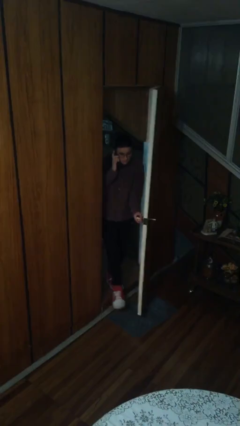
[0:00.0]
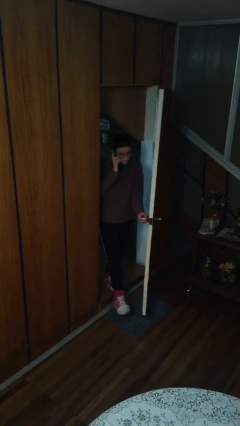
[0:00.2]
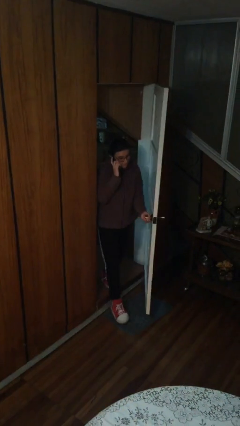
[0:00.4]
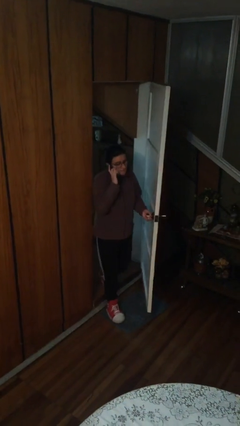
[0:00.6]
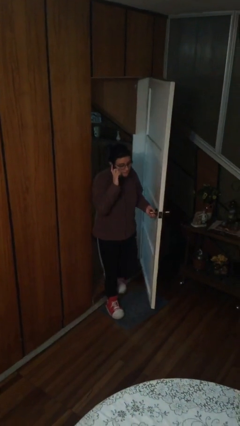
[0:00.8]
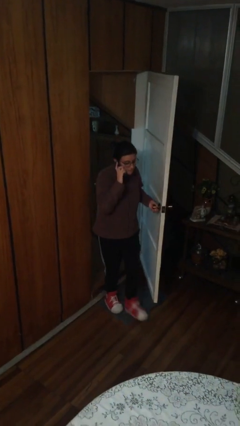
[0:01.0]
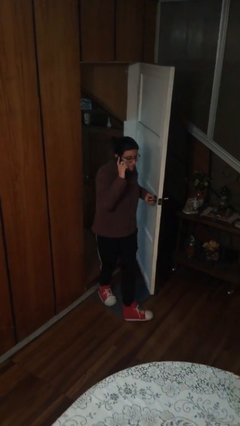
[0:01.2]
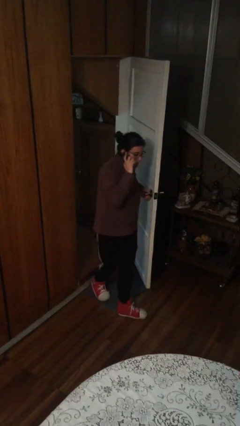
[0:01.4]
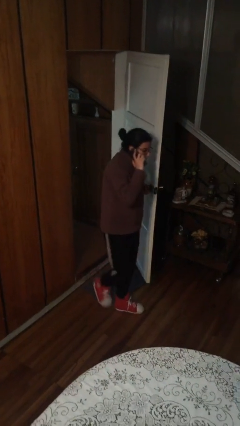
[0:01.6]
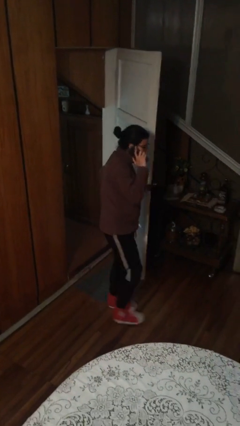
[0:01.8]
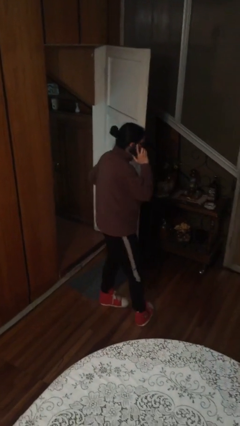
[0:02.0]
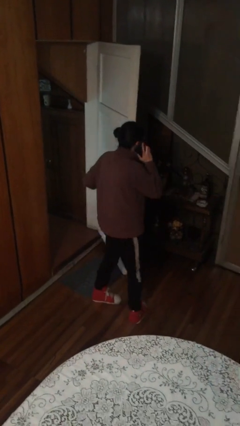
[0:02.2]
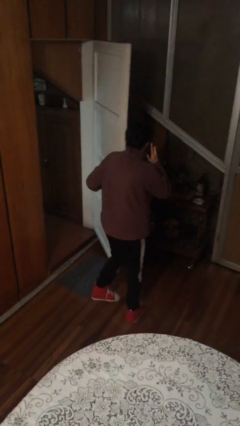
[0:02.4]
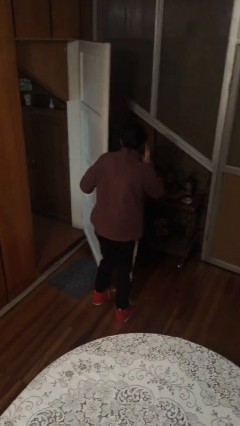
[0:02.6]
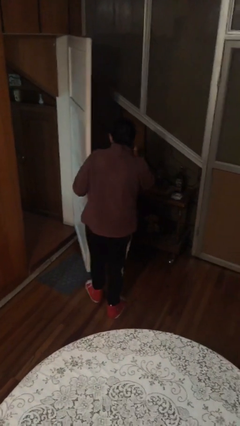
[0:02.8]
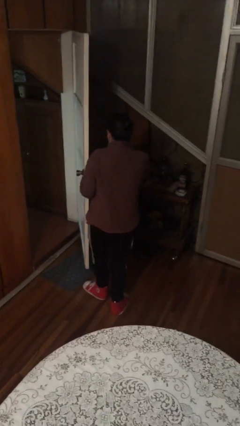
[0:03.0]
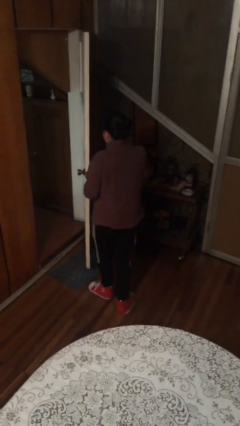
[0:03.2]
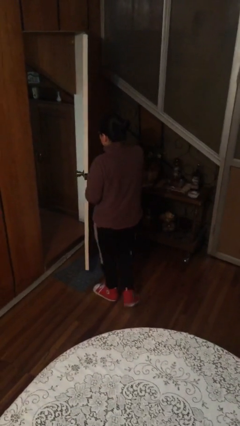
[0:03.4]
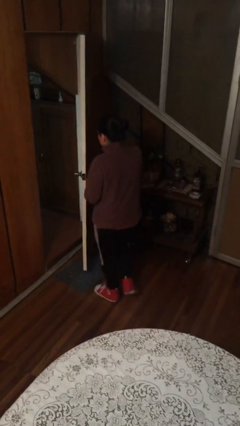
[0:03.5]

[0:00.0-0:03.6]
person enters scene through structure

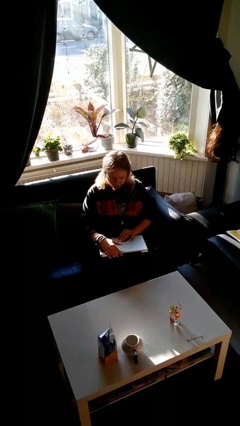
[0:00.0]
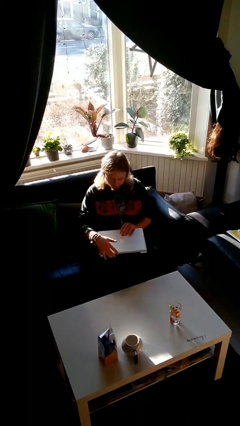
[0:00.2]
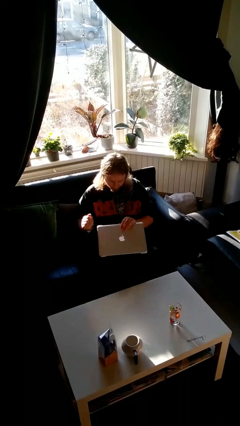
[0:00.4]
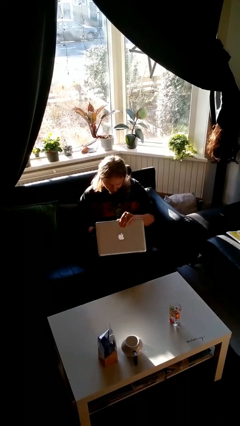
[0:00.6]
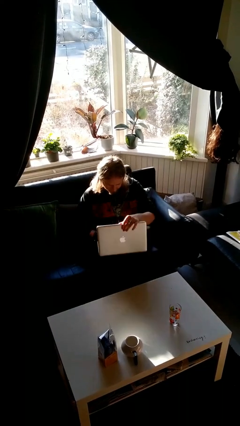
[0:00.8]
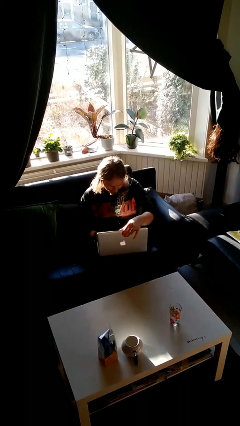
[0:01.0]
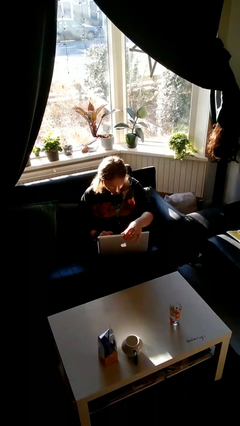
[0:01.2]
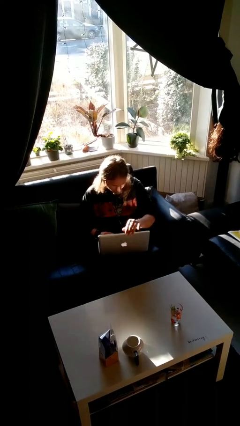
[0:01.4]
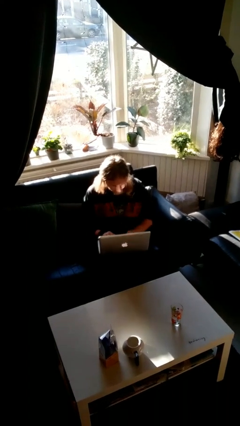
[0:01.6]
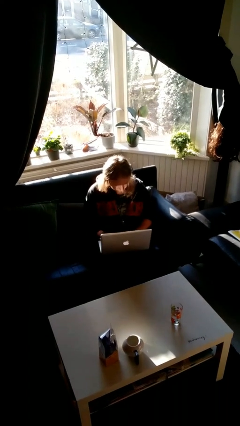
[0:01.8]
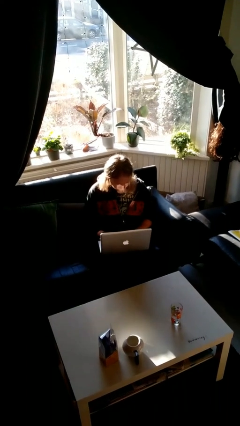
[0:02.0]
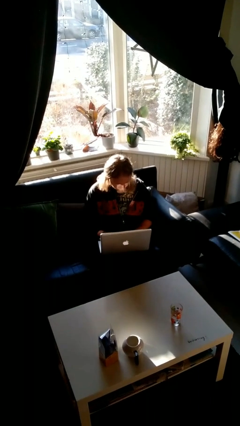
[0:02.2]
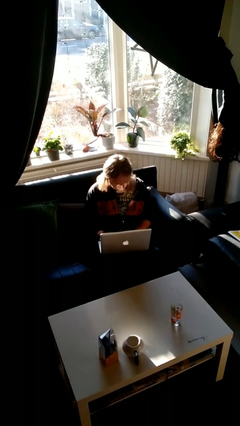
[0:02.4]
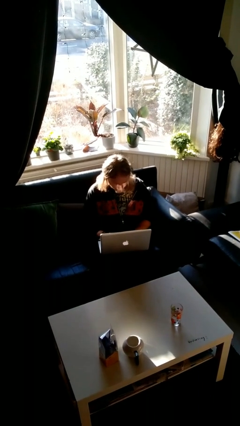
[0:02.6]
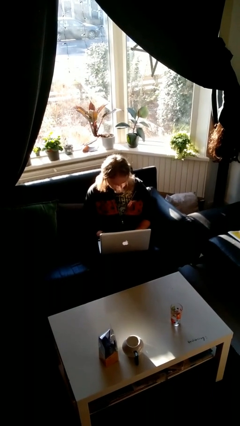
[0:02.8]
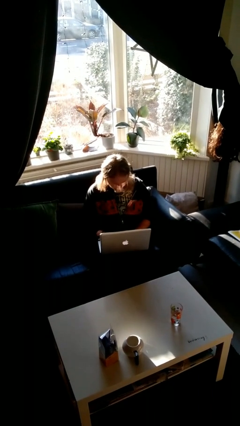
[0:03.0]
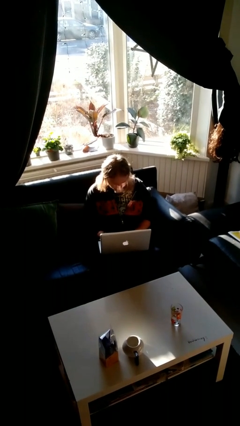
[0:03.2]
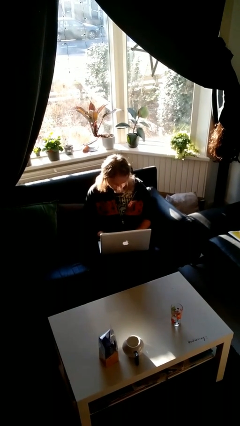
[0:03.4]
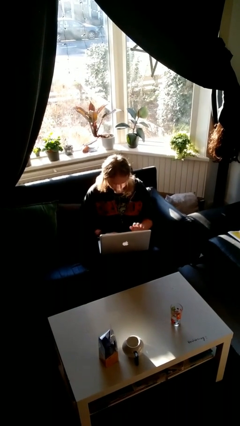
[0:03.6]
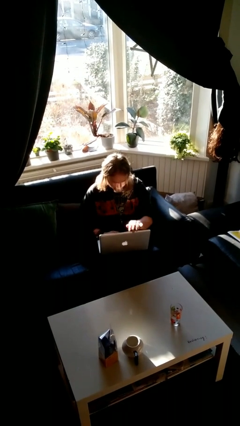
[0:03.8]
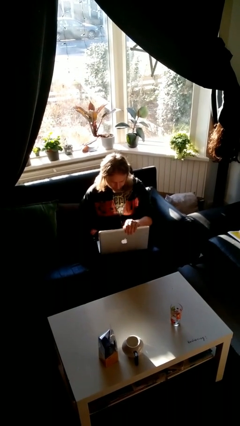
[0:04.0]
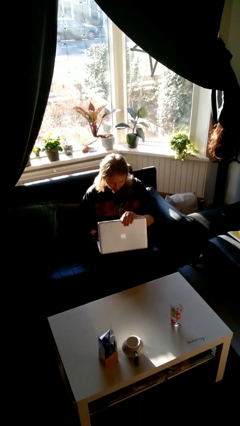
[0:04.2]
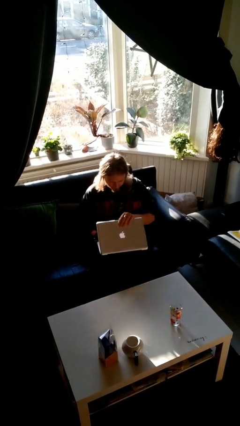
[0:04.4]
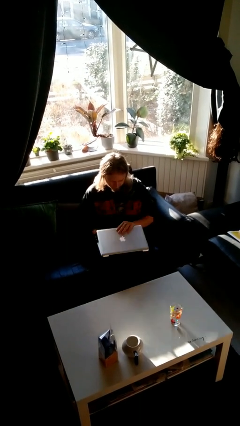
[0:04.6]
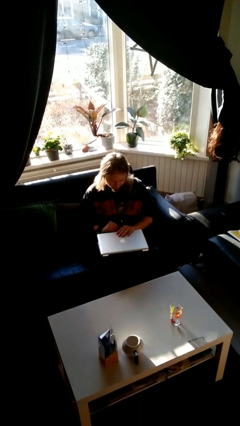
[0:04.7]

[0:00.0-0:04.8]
person interacts with laptop

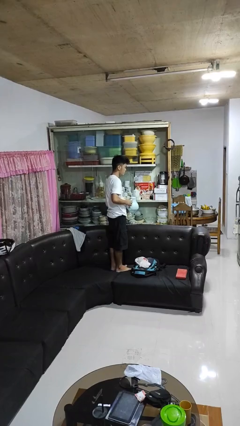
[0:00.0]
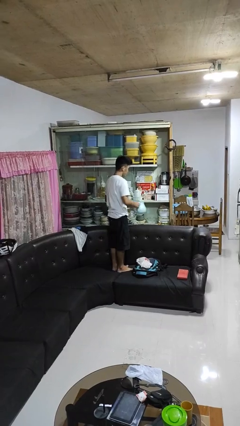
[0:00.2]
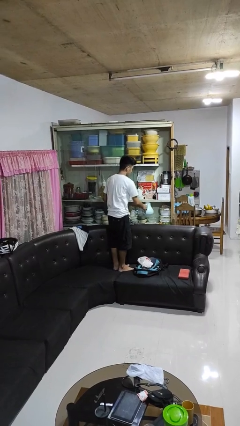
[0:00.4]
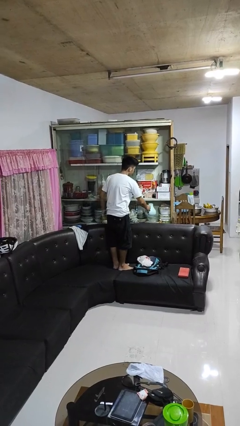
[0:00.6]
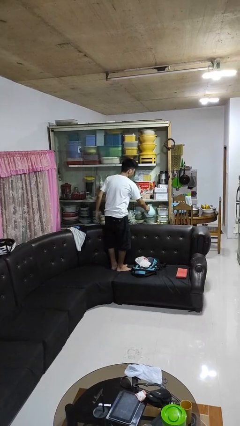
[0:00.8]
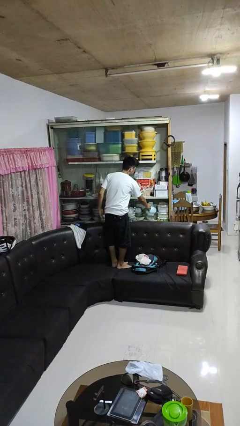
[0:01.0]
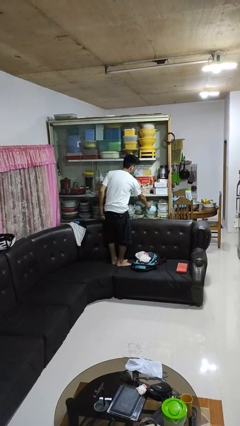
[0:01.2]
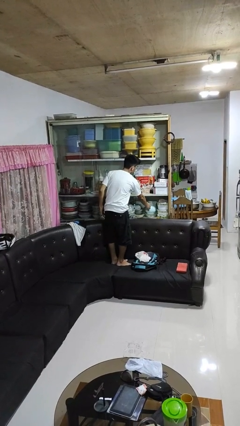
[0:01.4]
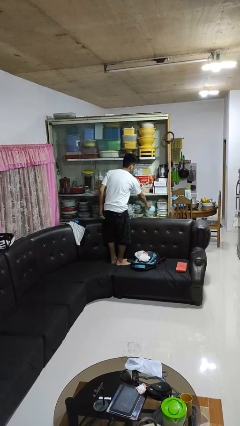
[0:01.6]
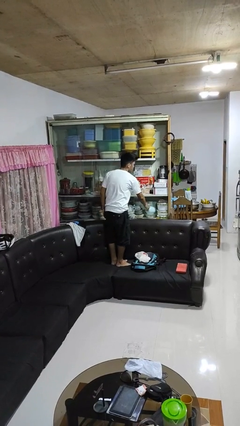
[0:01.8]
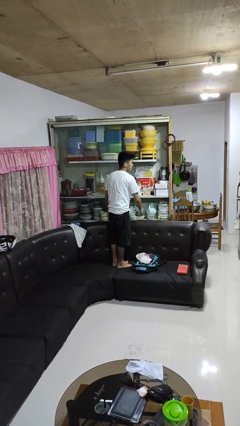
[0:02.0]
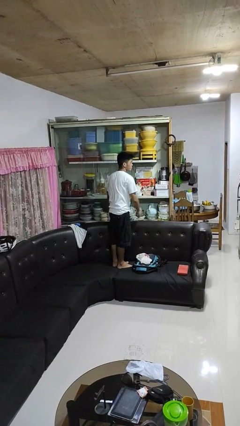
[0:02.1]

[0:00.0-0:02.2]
person puts down object into cabinet

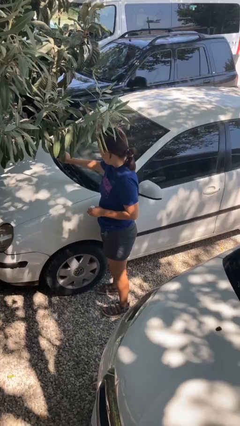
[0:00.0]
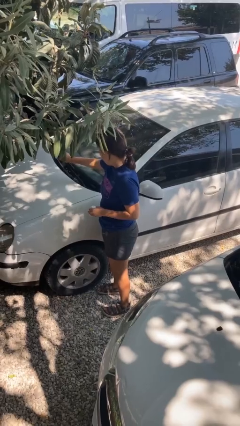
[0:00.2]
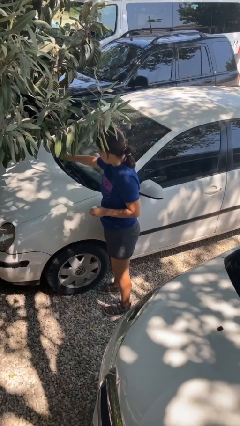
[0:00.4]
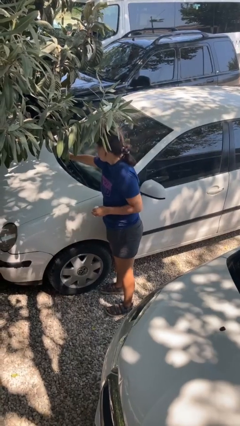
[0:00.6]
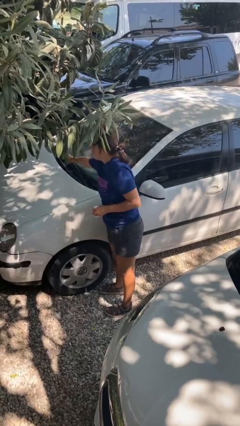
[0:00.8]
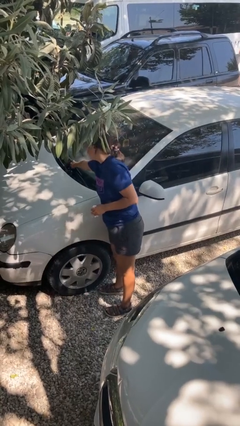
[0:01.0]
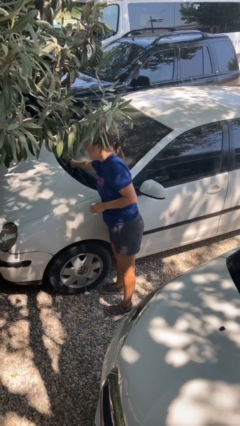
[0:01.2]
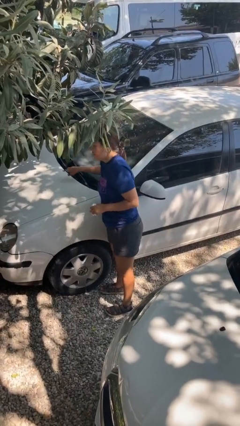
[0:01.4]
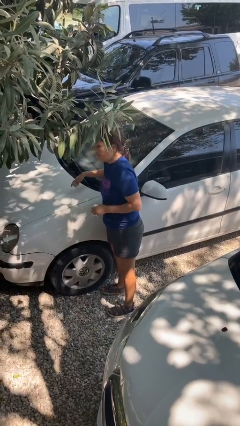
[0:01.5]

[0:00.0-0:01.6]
person flips down car wipers

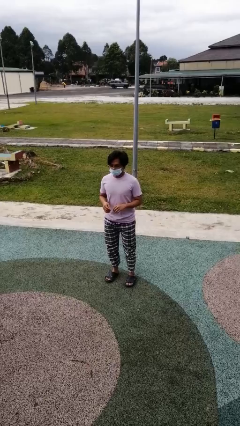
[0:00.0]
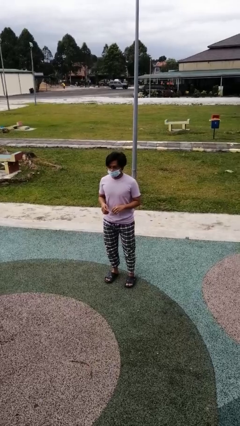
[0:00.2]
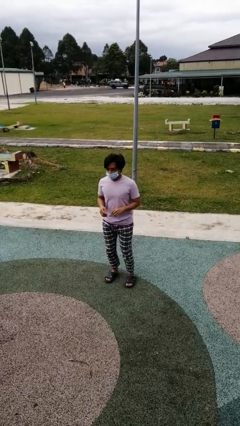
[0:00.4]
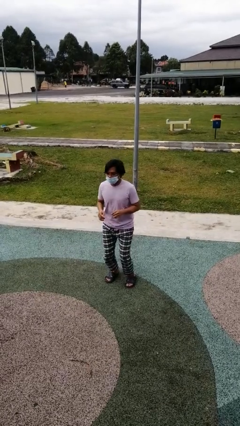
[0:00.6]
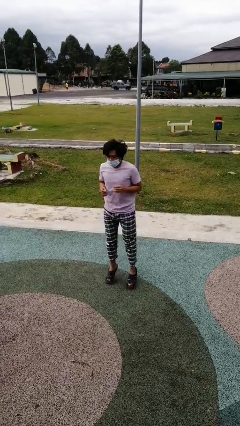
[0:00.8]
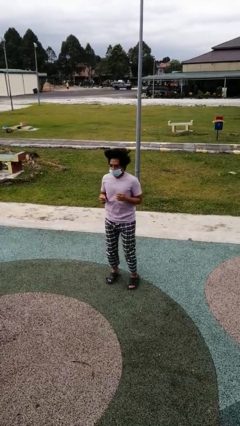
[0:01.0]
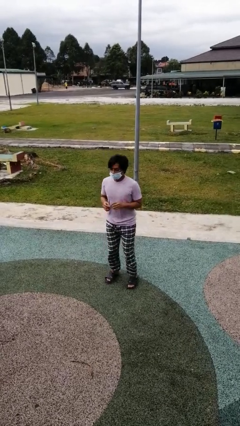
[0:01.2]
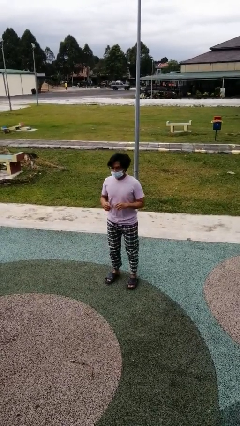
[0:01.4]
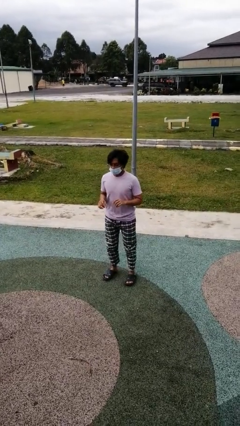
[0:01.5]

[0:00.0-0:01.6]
person jumps

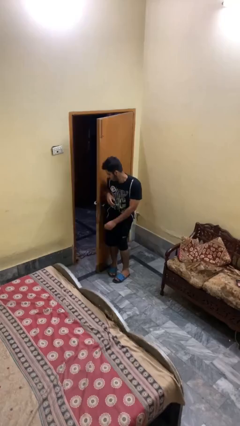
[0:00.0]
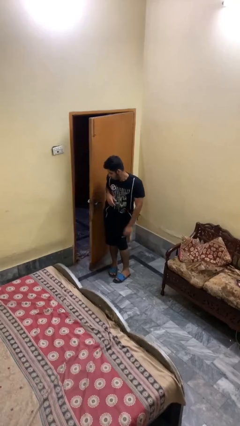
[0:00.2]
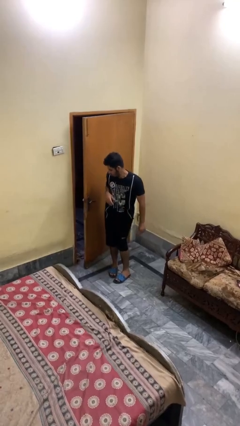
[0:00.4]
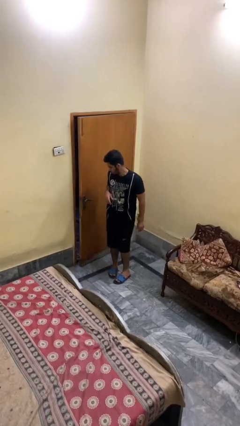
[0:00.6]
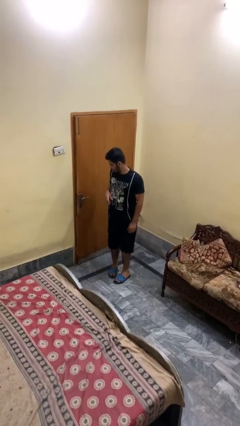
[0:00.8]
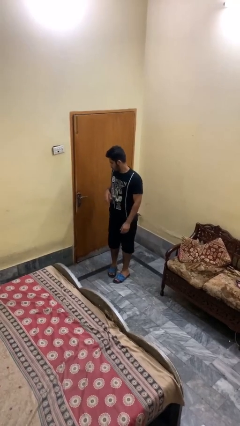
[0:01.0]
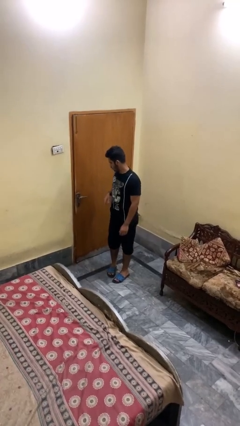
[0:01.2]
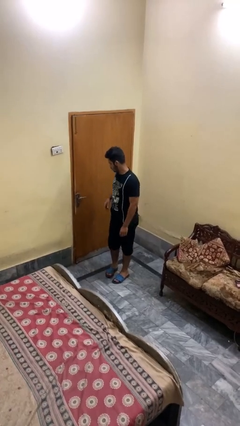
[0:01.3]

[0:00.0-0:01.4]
person closes door with hip

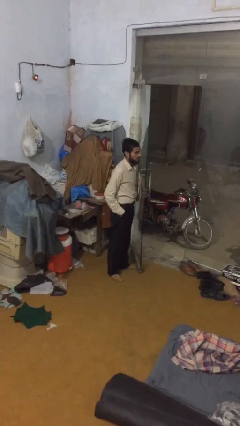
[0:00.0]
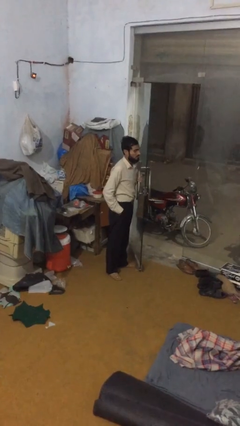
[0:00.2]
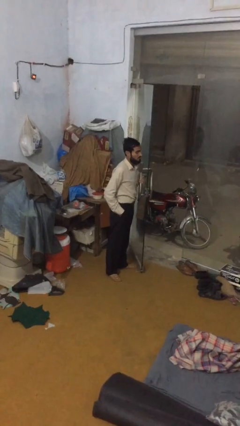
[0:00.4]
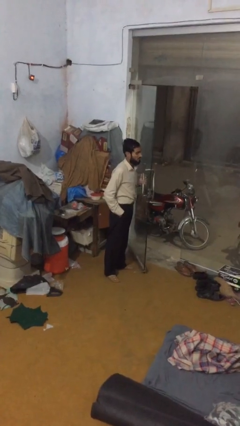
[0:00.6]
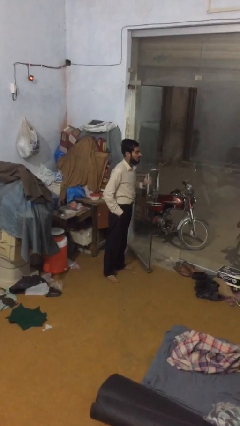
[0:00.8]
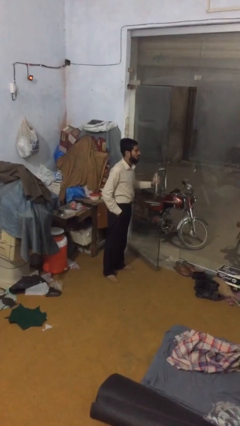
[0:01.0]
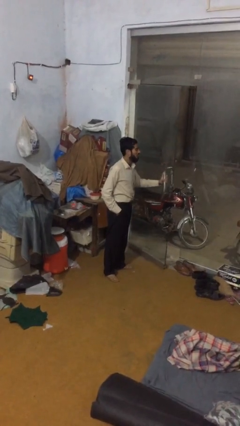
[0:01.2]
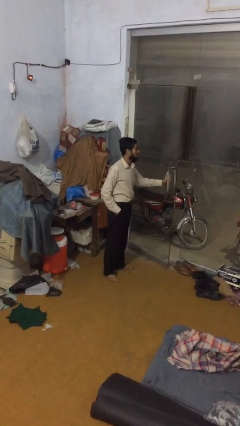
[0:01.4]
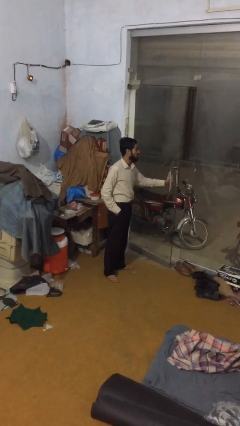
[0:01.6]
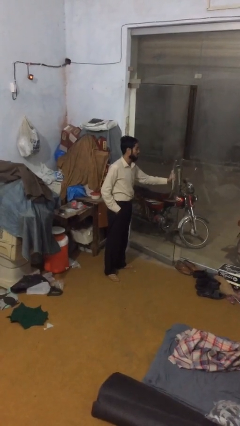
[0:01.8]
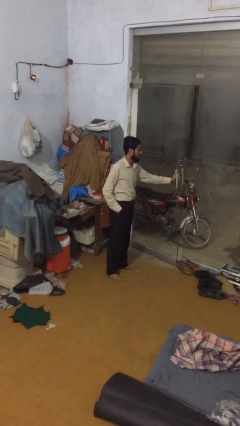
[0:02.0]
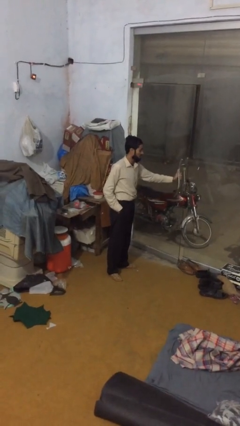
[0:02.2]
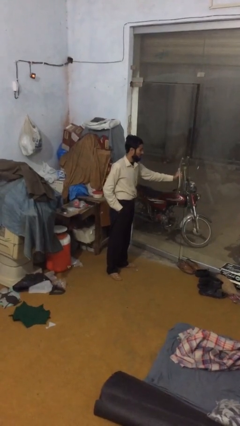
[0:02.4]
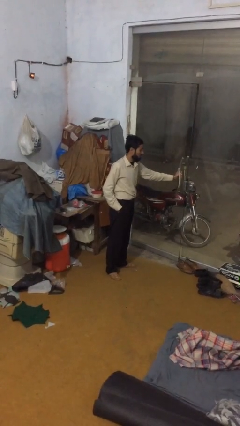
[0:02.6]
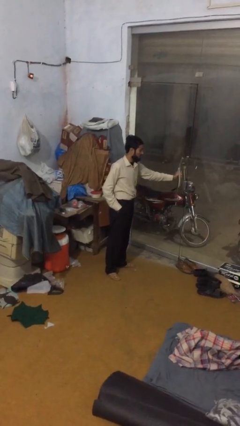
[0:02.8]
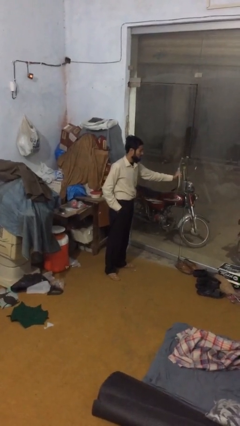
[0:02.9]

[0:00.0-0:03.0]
person closes facility door
